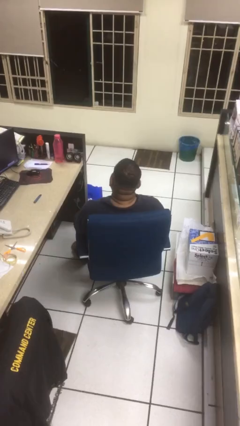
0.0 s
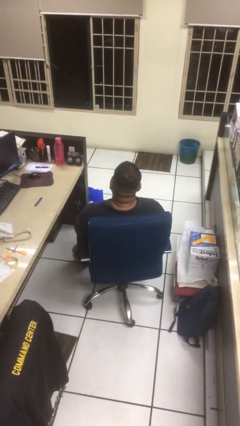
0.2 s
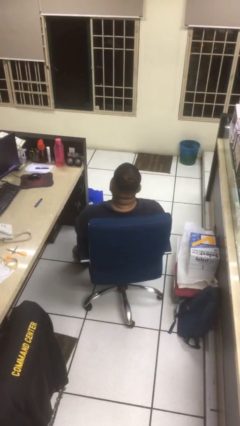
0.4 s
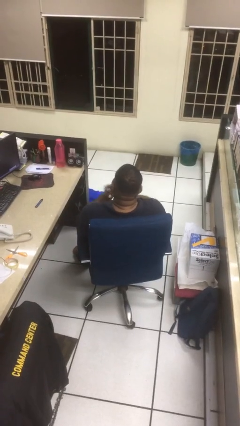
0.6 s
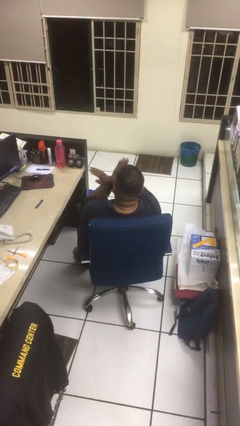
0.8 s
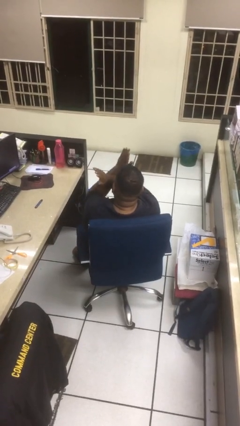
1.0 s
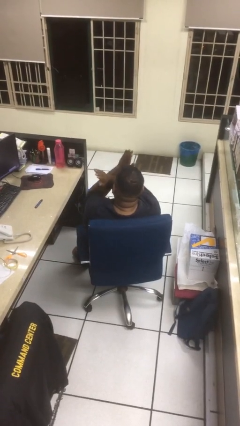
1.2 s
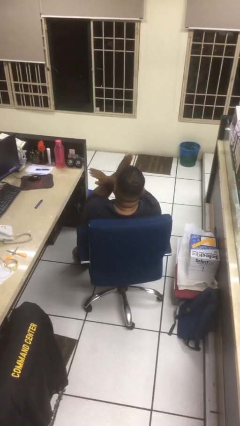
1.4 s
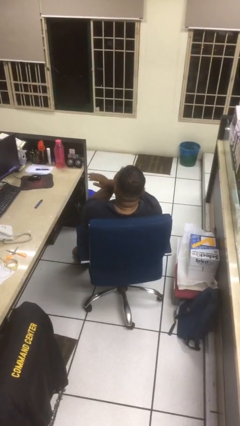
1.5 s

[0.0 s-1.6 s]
person gestures arms x

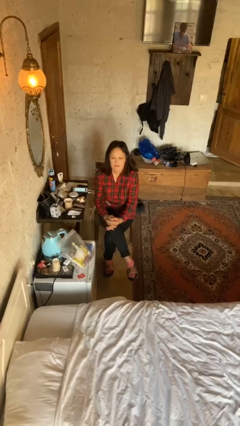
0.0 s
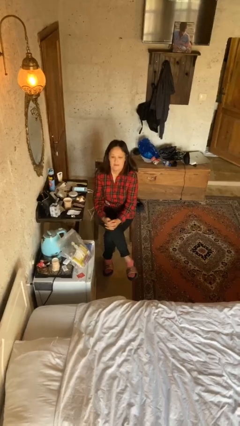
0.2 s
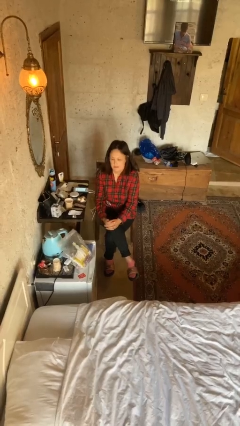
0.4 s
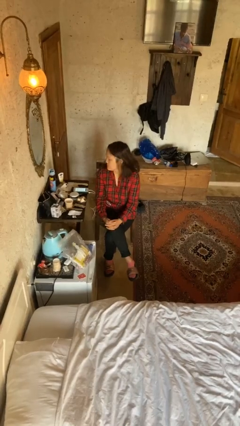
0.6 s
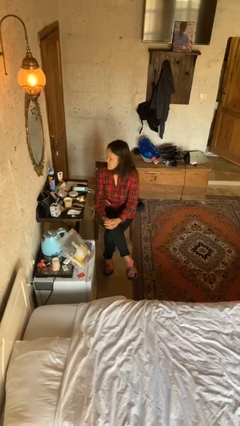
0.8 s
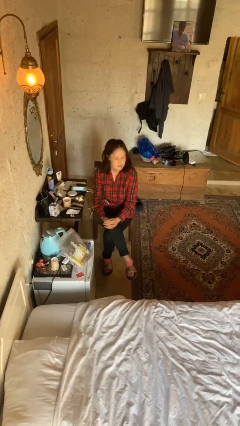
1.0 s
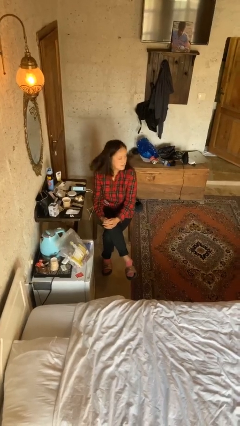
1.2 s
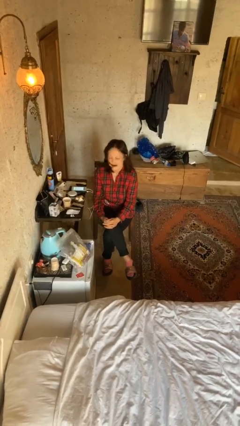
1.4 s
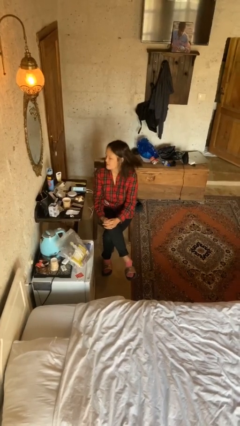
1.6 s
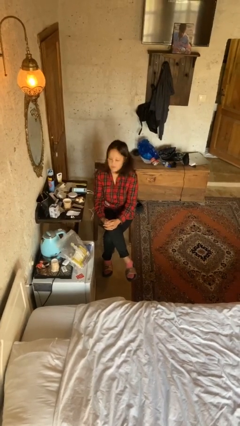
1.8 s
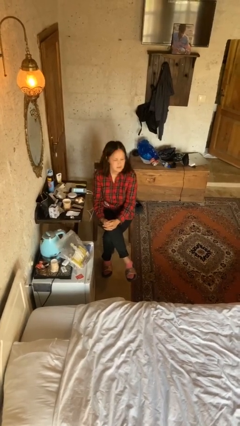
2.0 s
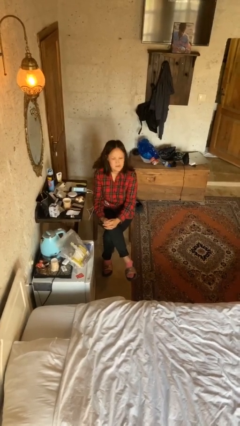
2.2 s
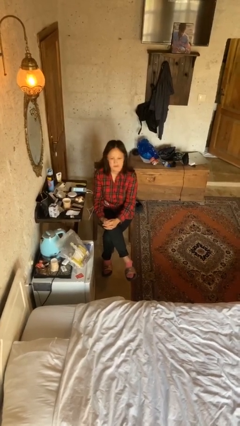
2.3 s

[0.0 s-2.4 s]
person shakes head

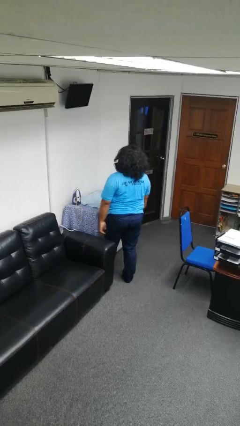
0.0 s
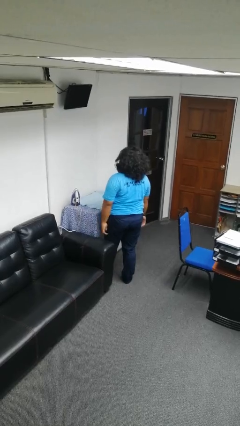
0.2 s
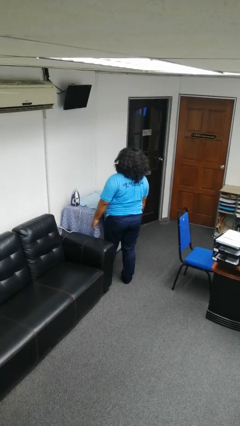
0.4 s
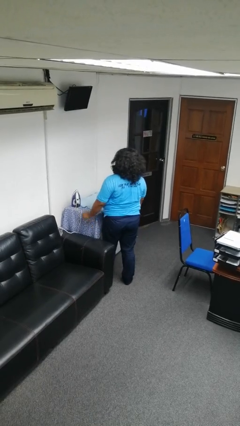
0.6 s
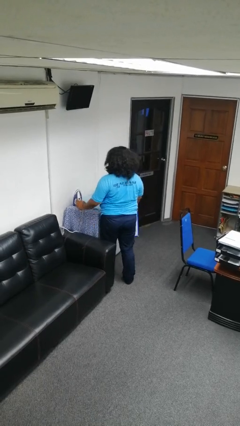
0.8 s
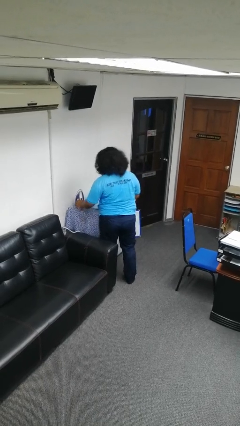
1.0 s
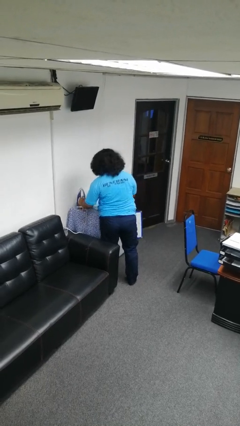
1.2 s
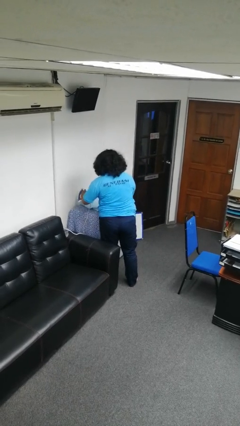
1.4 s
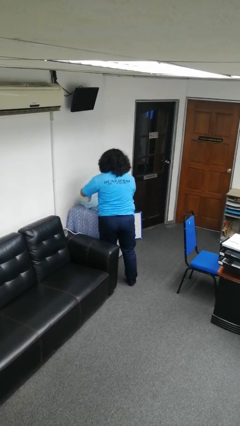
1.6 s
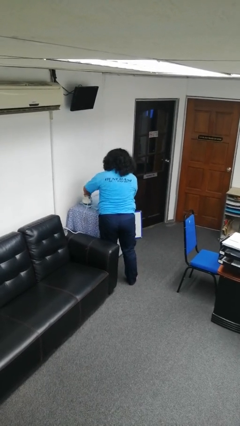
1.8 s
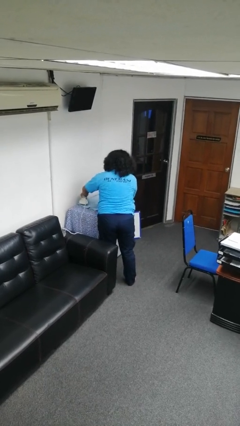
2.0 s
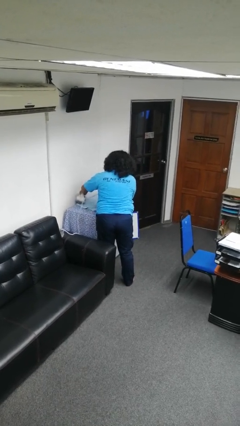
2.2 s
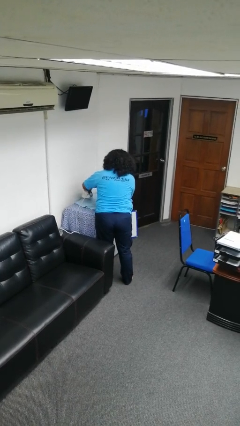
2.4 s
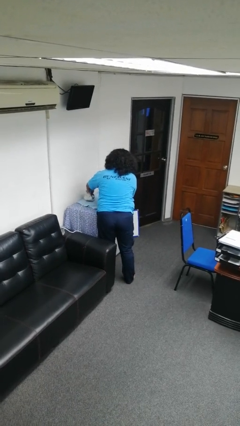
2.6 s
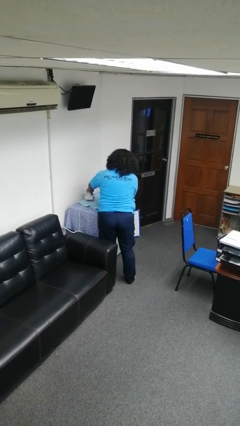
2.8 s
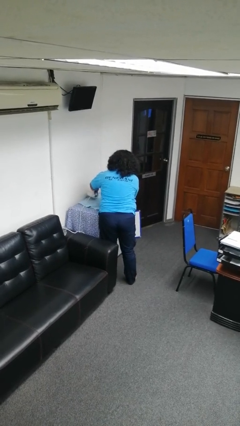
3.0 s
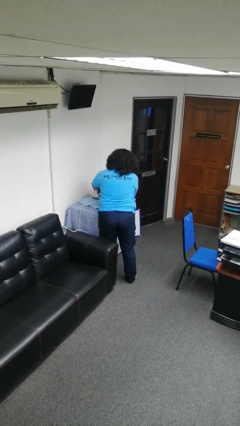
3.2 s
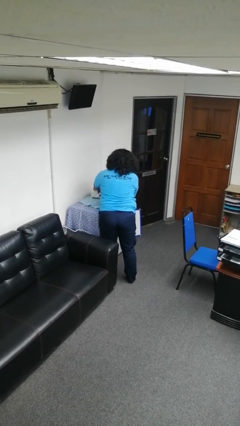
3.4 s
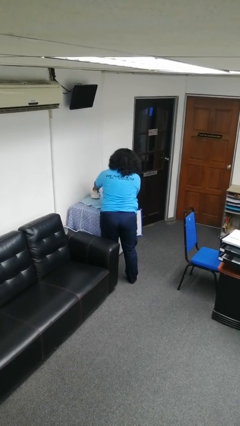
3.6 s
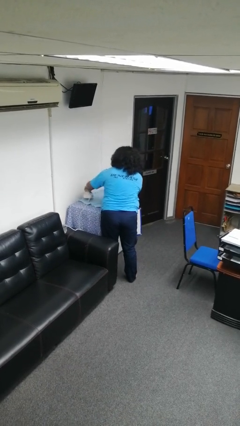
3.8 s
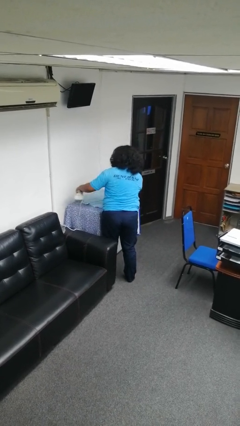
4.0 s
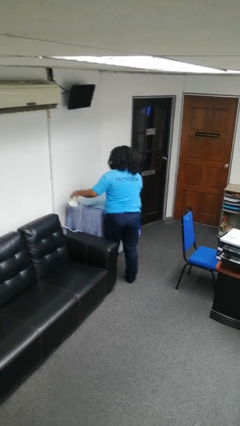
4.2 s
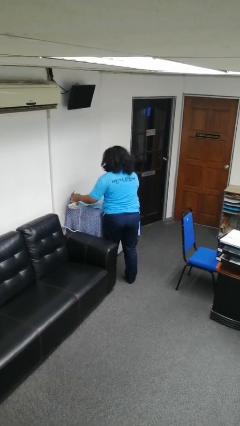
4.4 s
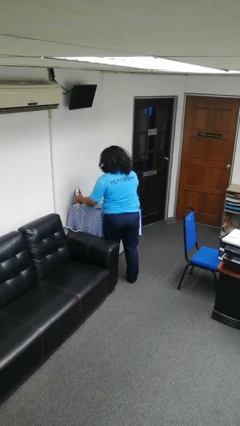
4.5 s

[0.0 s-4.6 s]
person irons clothes

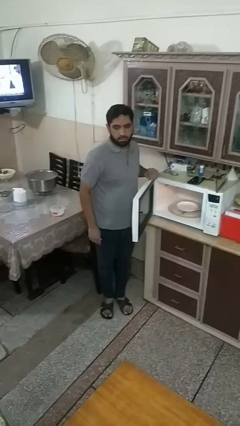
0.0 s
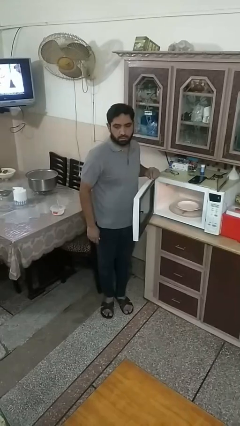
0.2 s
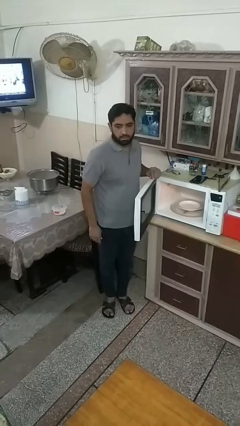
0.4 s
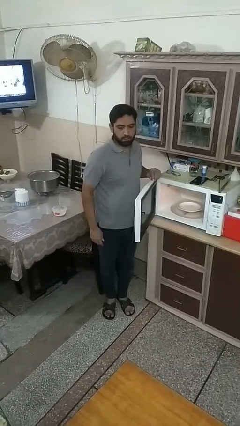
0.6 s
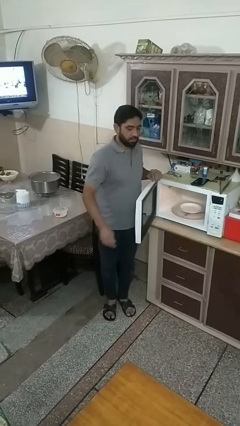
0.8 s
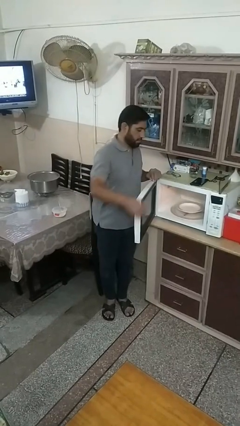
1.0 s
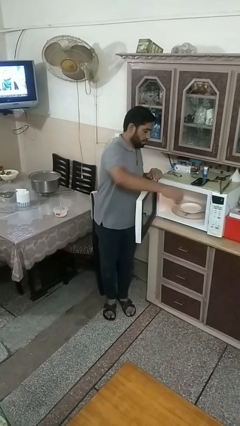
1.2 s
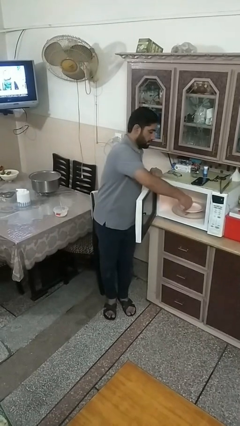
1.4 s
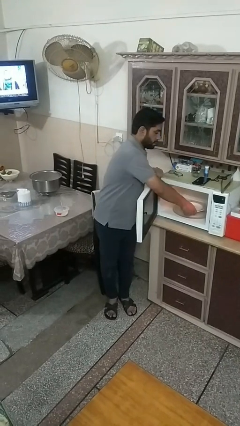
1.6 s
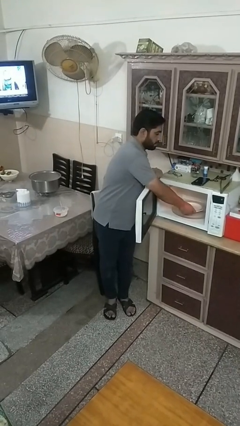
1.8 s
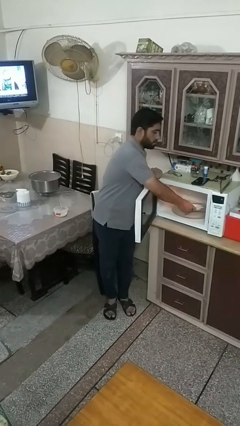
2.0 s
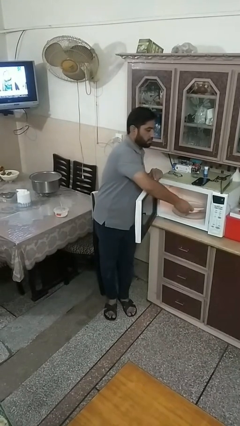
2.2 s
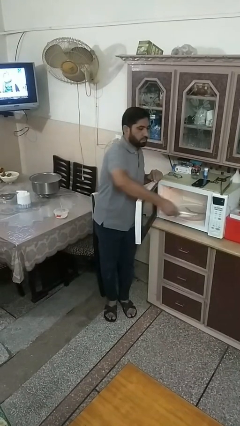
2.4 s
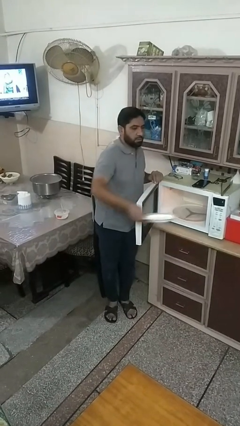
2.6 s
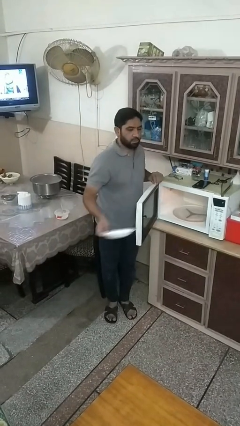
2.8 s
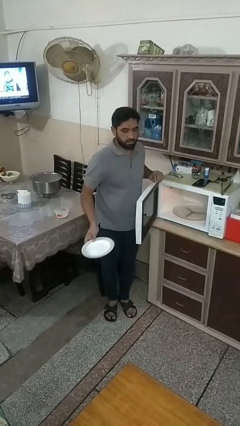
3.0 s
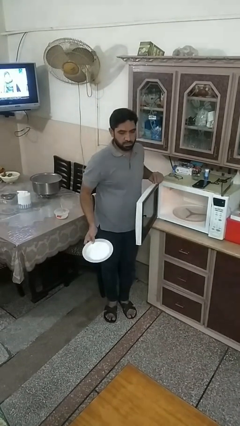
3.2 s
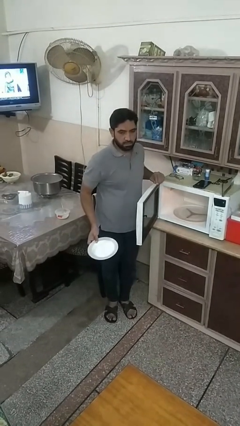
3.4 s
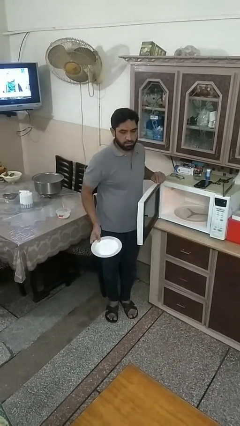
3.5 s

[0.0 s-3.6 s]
person takes object from microwave

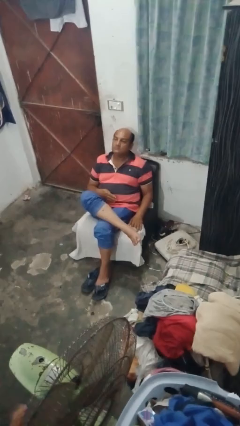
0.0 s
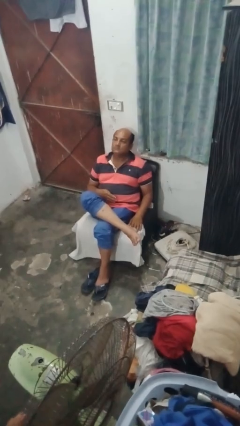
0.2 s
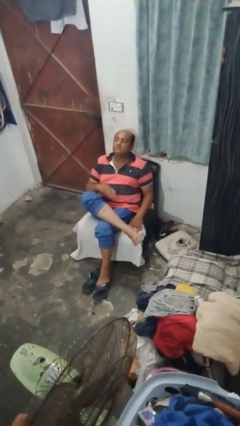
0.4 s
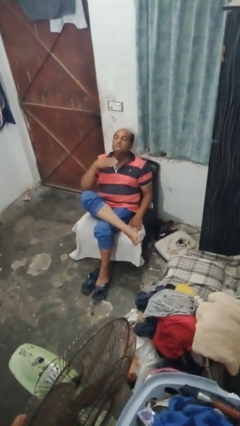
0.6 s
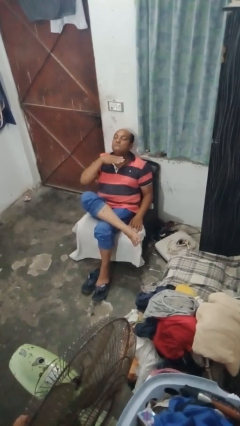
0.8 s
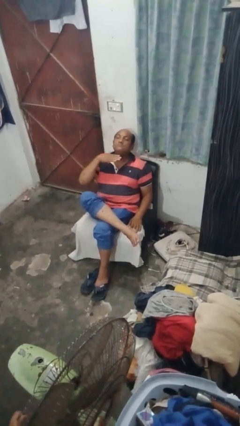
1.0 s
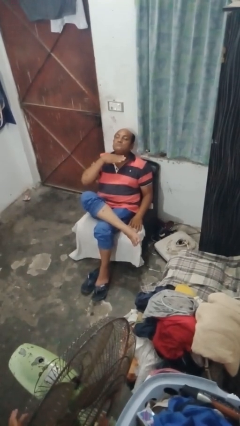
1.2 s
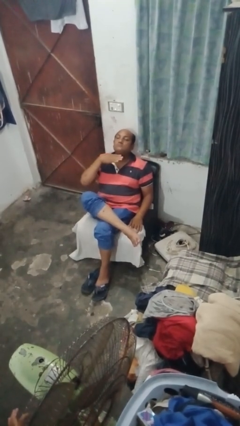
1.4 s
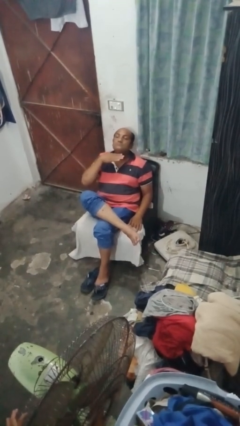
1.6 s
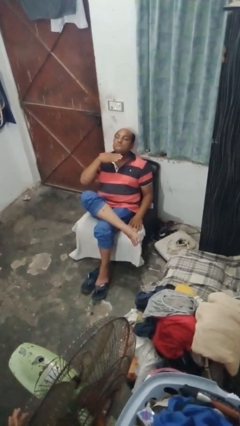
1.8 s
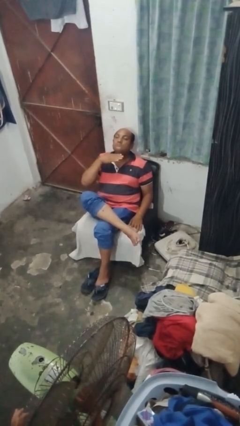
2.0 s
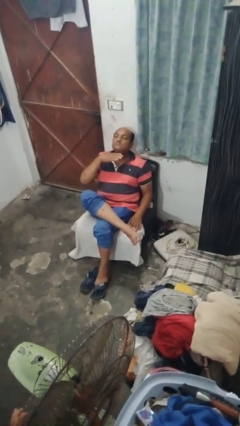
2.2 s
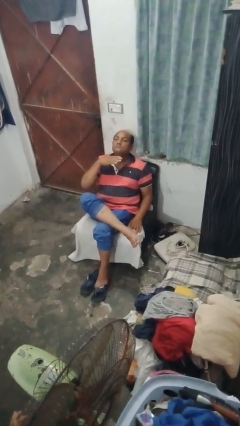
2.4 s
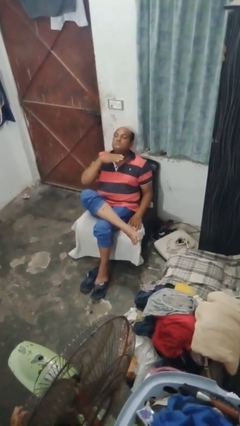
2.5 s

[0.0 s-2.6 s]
person gestures cut

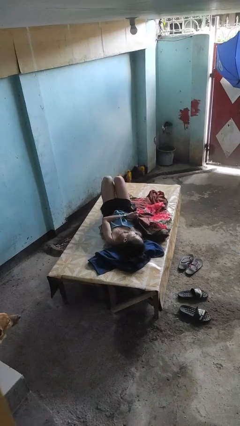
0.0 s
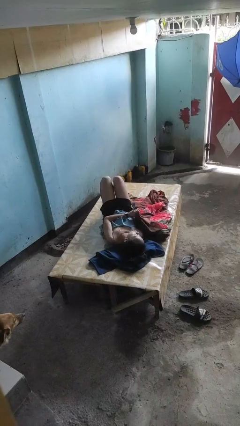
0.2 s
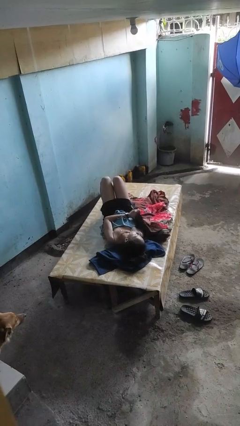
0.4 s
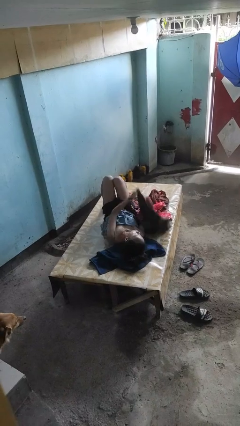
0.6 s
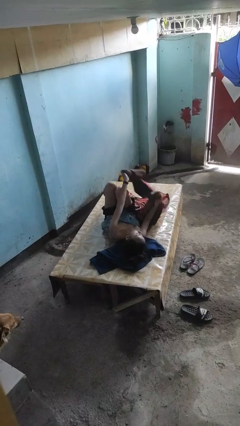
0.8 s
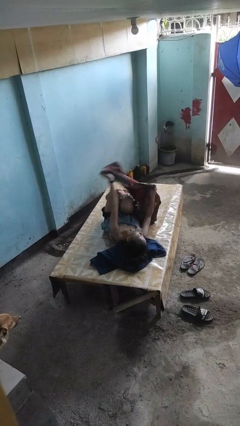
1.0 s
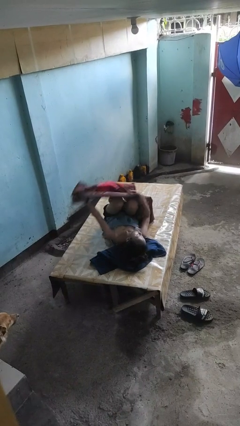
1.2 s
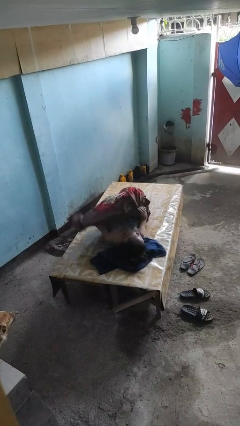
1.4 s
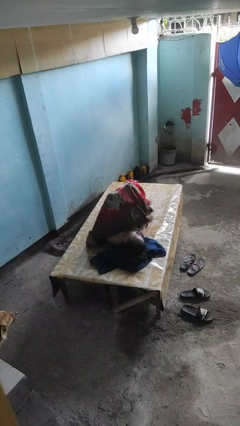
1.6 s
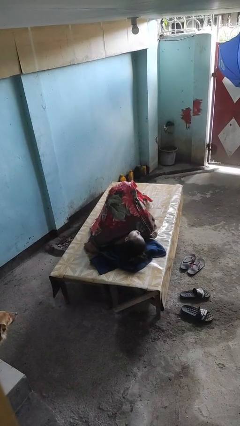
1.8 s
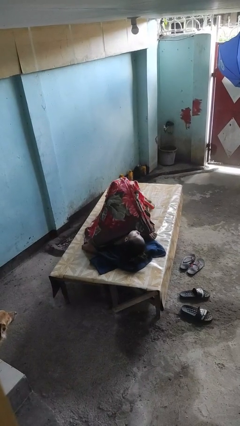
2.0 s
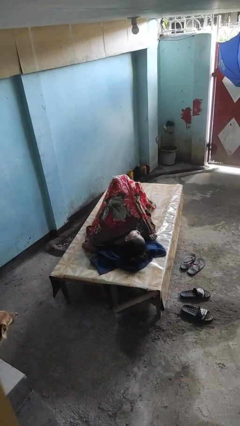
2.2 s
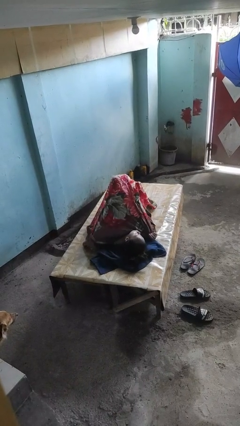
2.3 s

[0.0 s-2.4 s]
person covers with blanket

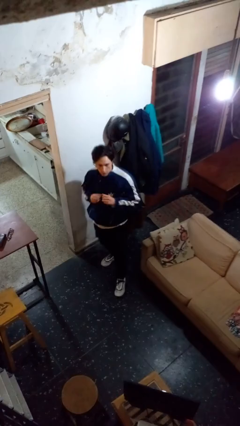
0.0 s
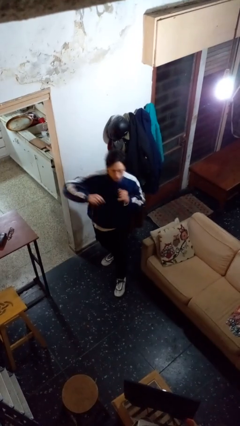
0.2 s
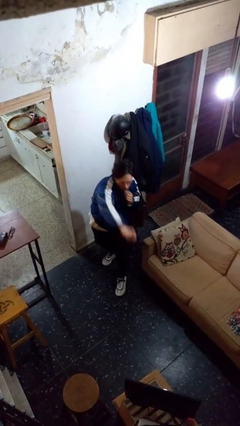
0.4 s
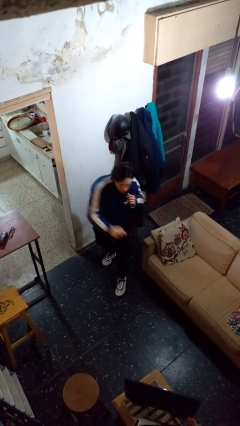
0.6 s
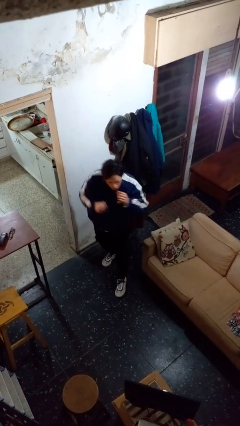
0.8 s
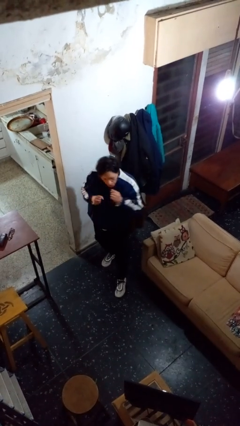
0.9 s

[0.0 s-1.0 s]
person karate chop
